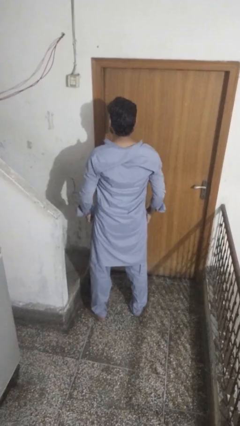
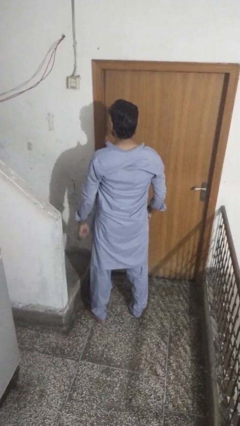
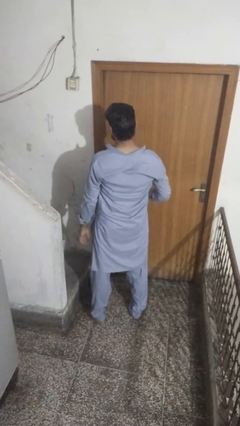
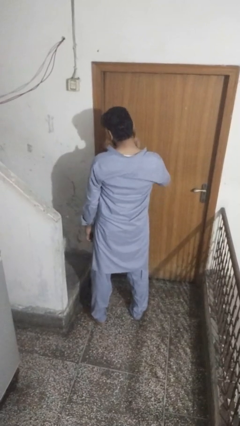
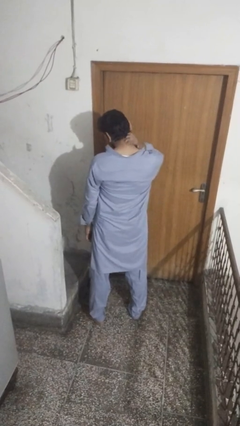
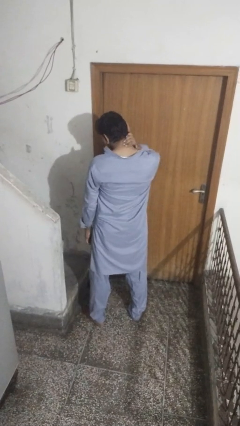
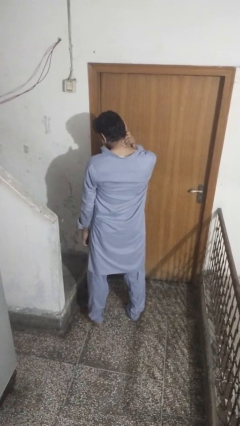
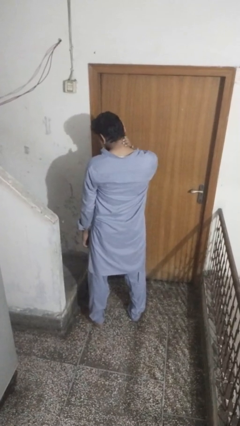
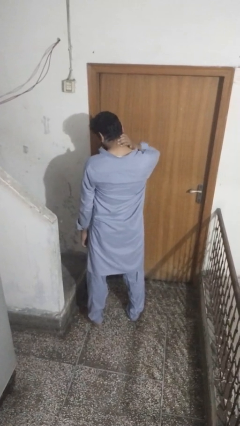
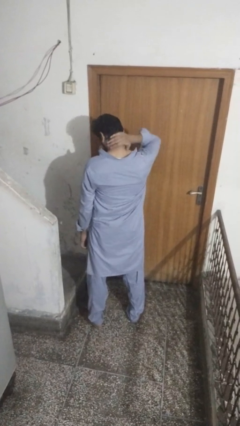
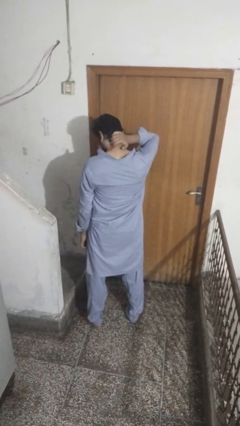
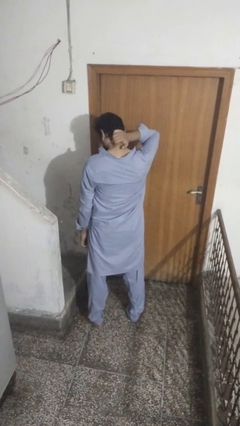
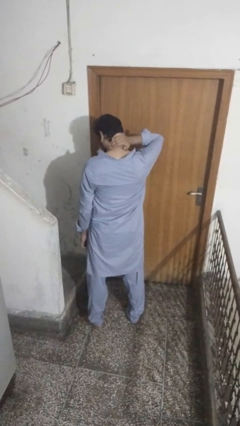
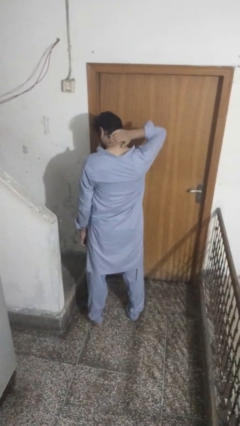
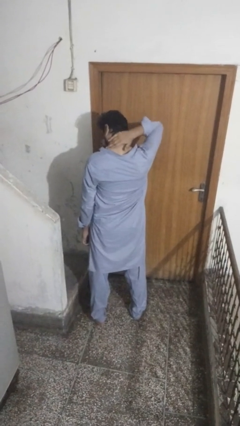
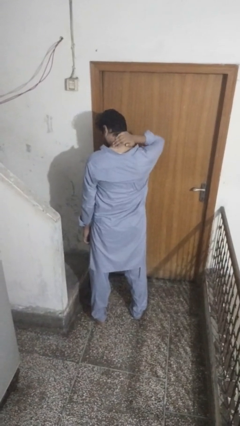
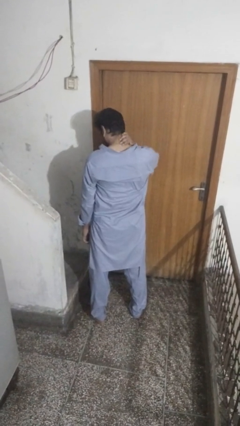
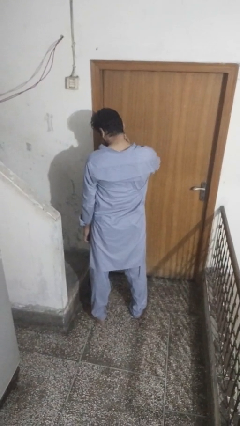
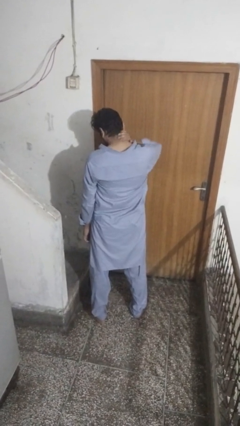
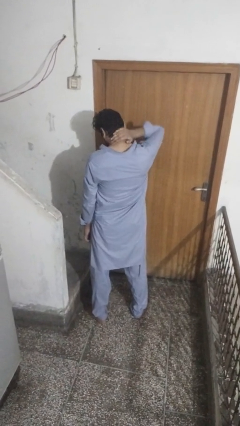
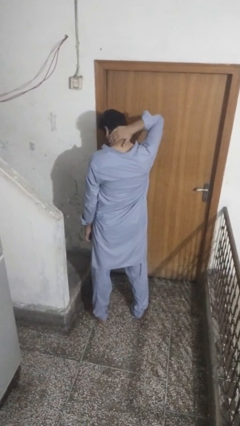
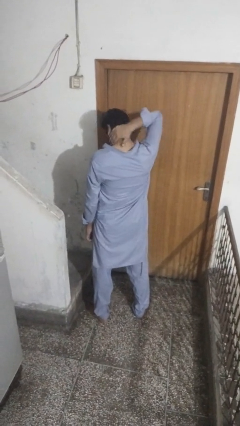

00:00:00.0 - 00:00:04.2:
person rubs neck

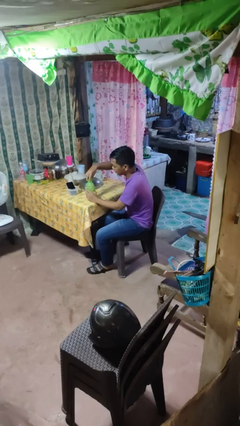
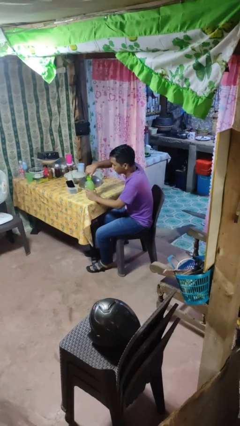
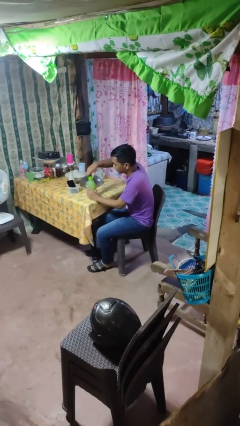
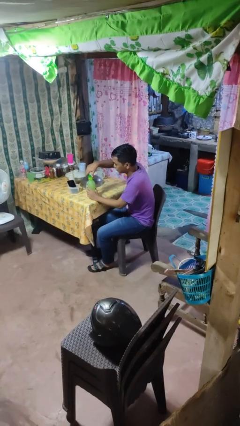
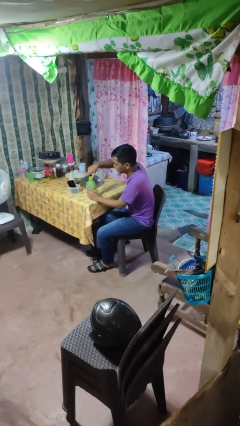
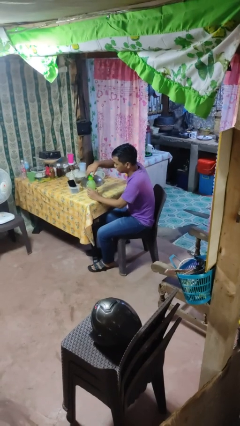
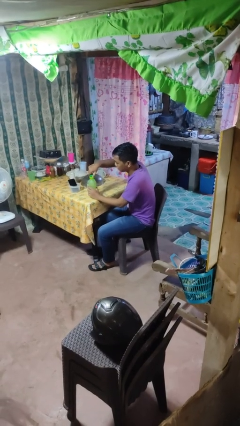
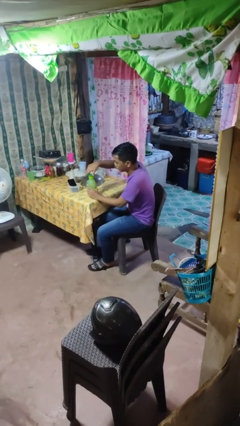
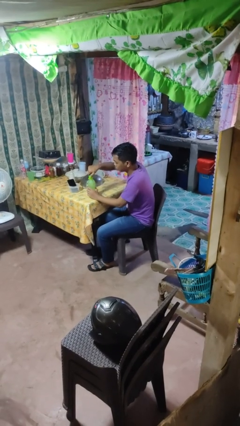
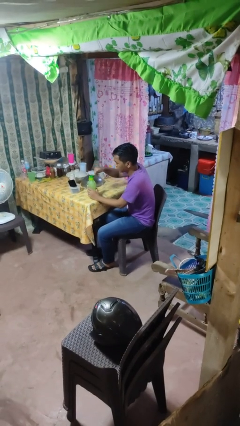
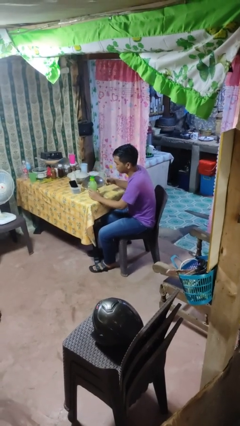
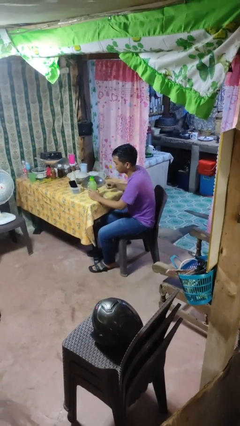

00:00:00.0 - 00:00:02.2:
person screws lid to bottle

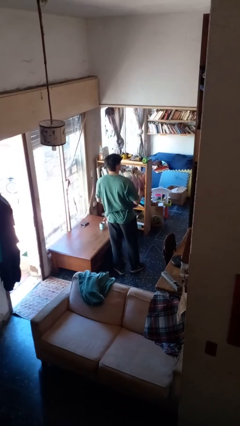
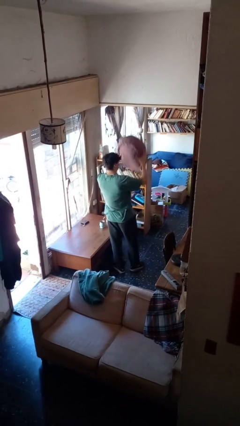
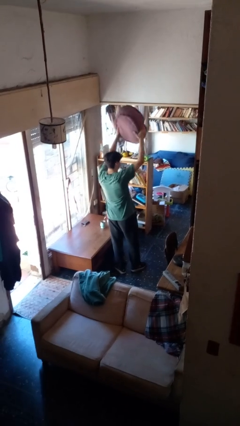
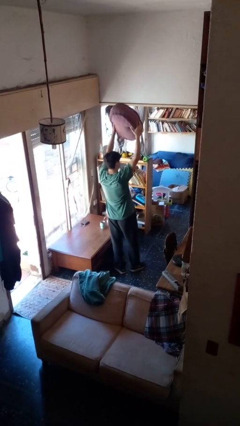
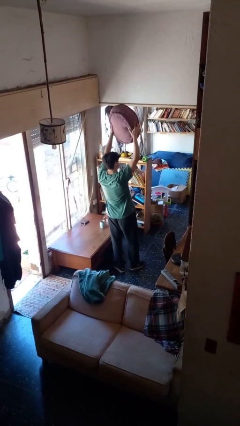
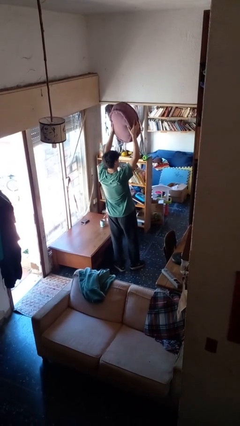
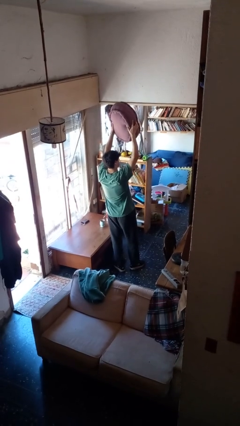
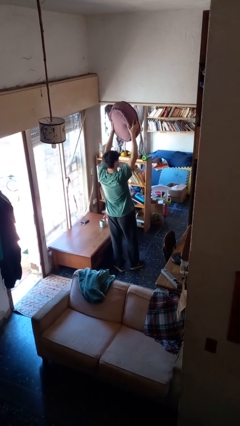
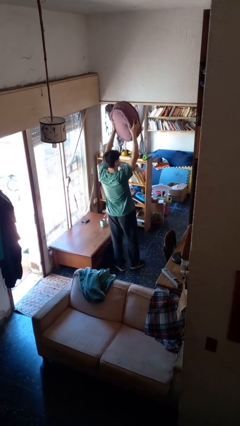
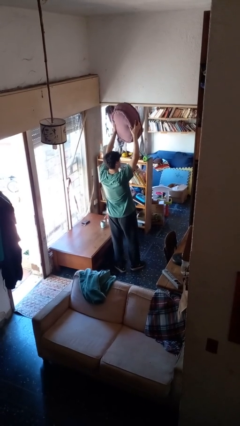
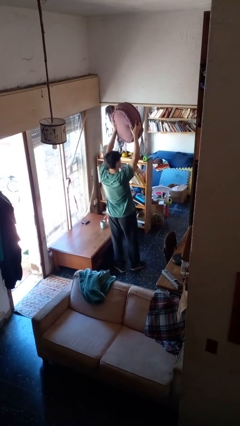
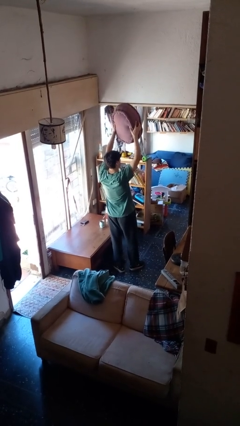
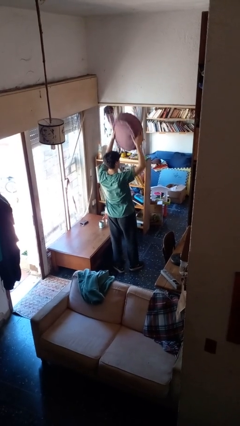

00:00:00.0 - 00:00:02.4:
person holds object above head

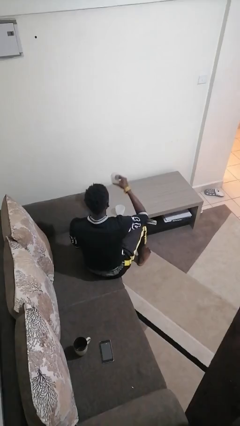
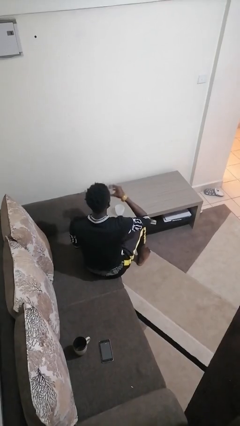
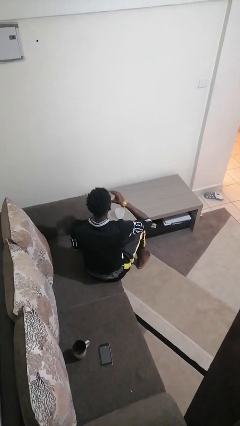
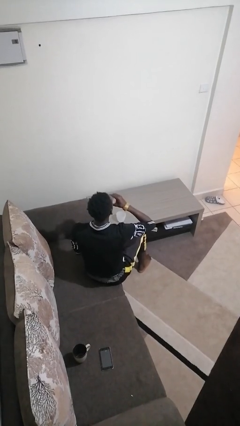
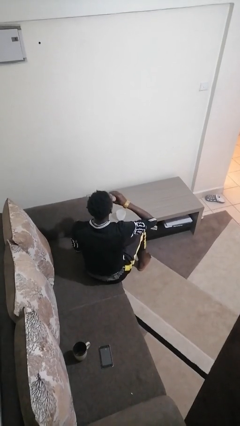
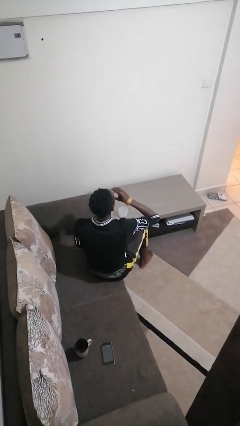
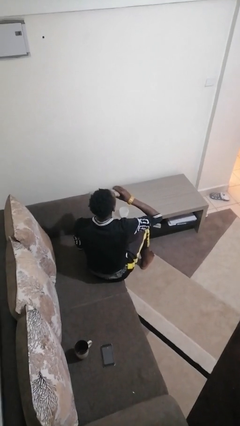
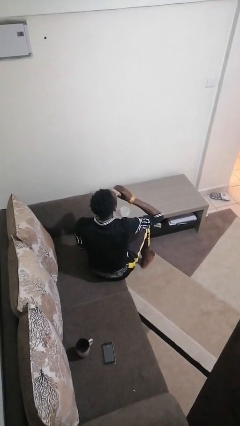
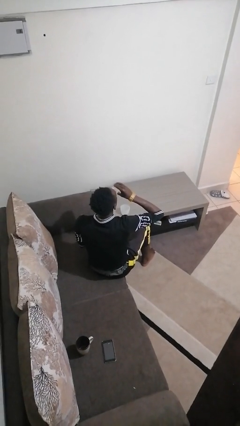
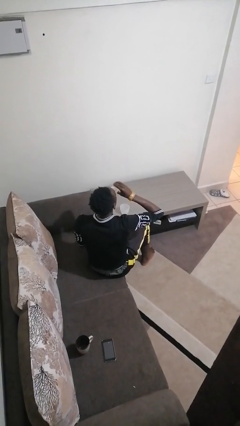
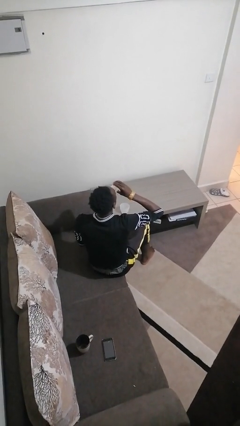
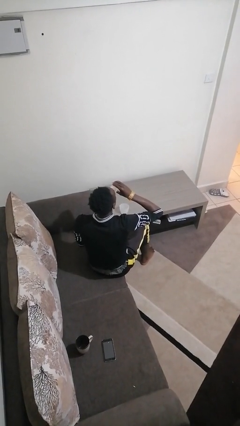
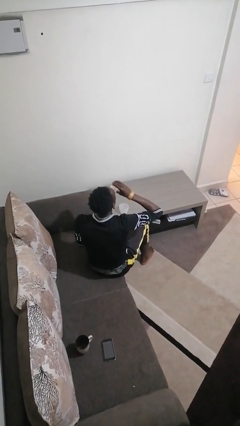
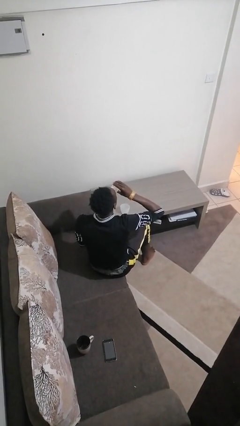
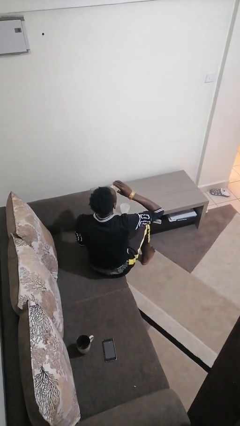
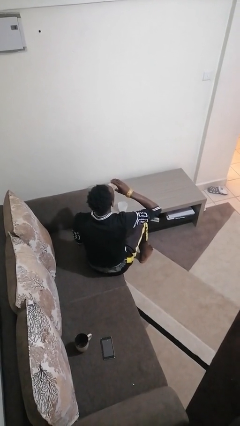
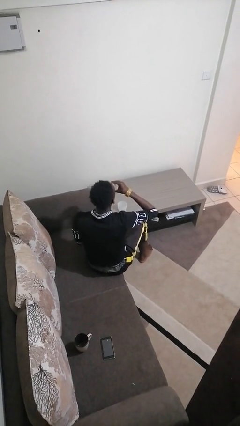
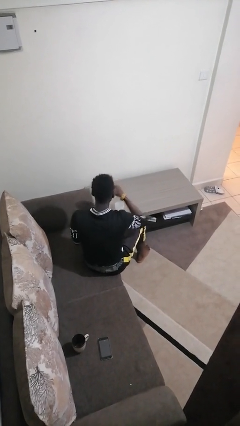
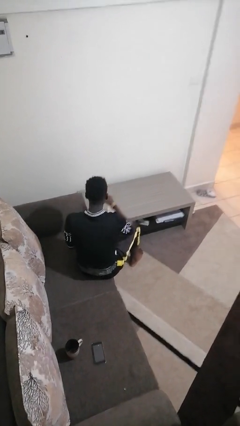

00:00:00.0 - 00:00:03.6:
person drinks from shotglass

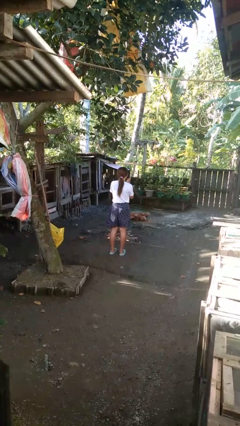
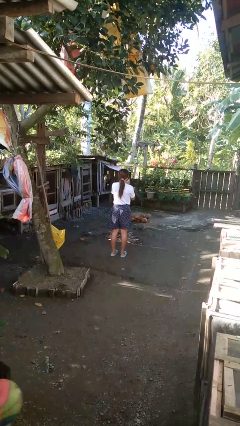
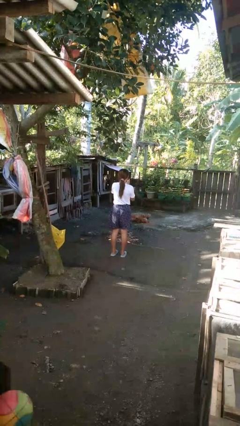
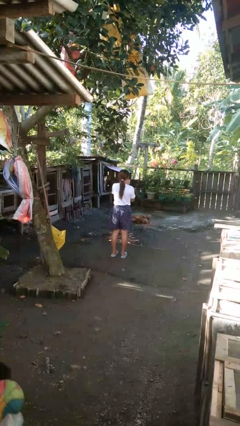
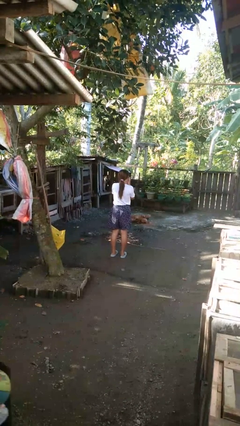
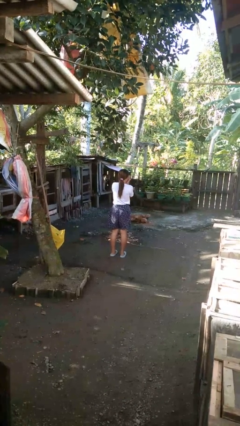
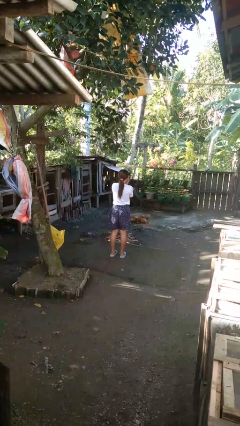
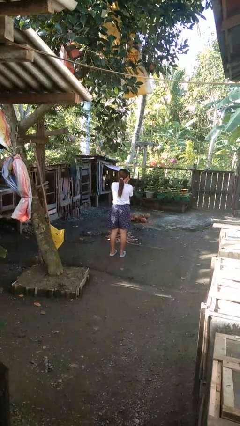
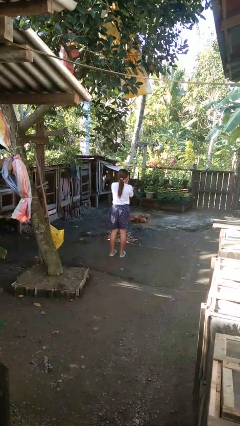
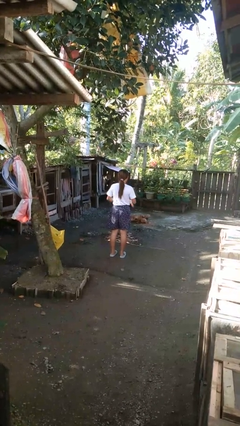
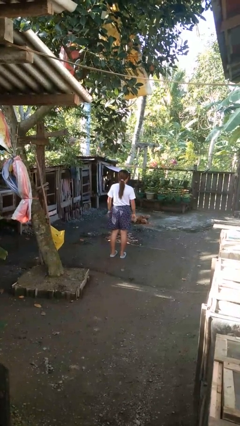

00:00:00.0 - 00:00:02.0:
person blows into hands

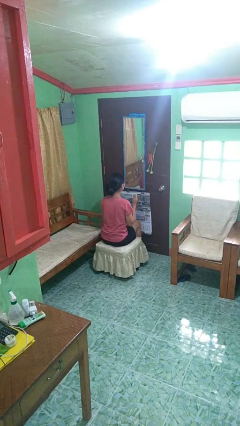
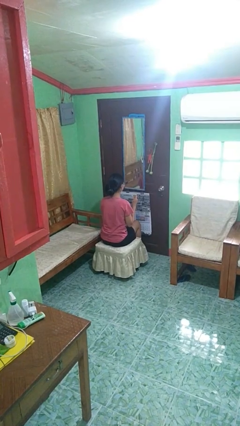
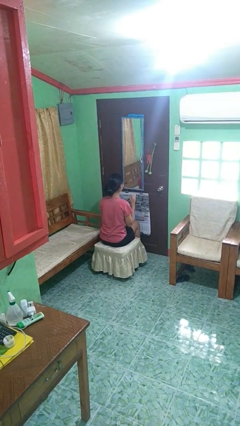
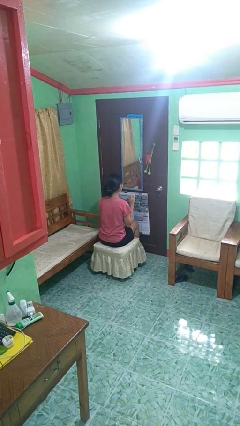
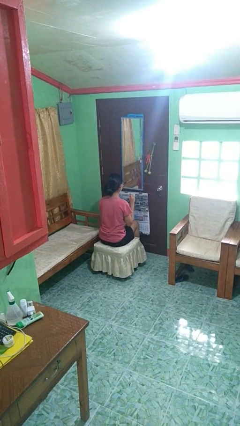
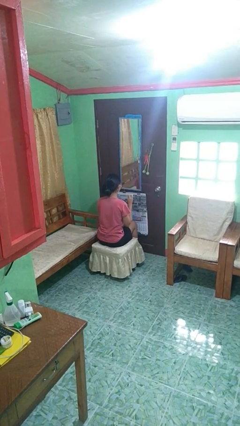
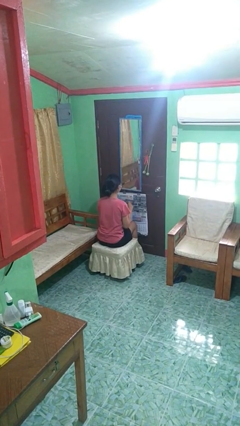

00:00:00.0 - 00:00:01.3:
person snaps fingers

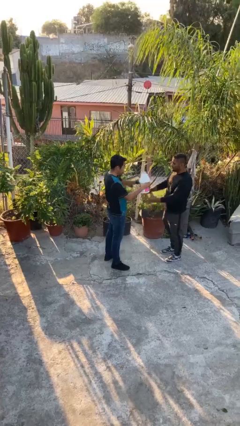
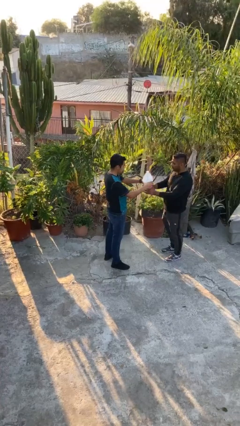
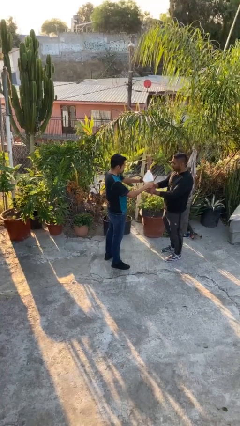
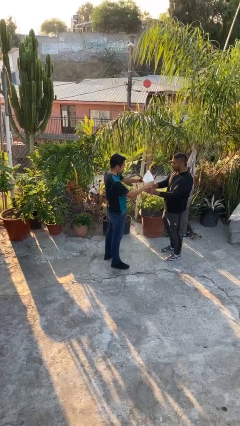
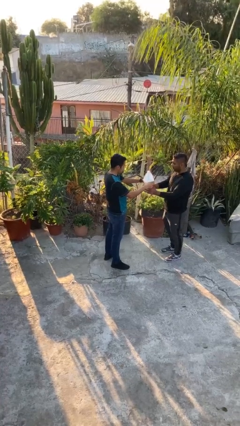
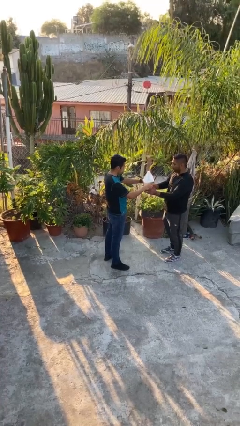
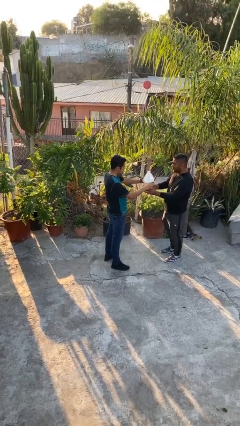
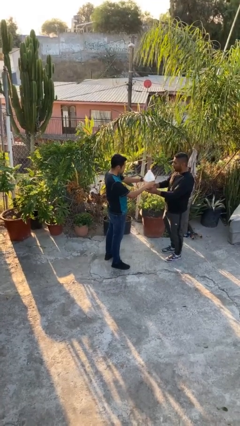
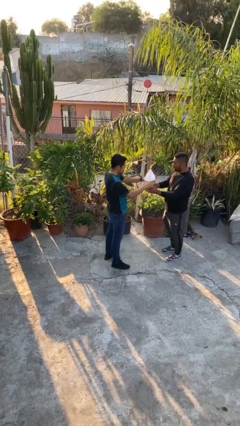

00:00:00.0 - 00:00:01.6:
person transfers object to person
